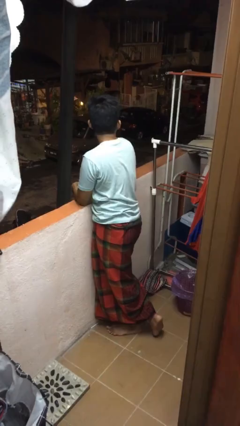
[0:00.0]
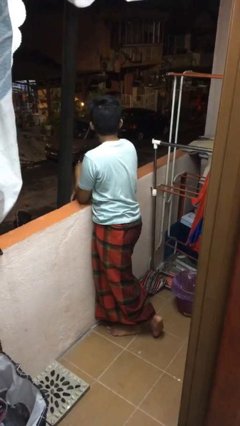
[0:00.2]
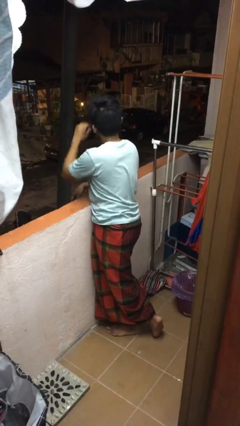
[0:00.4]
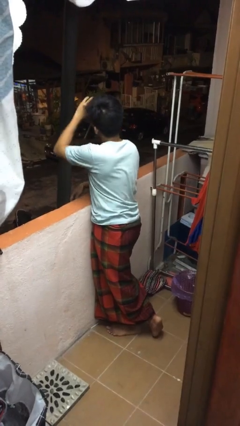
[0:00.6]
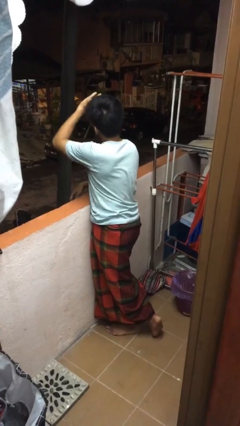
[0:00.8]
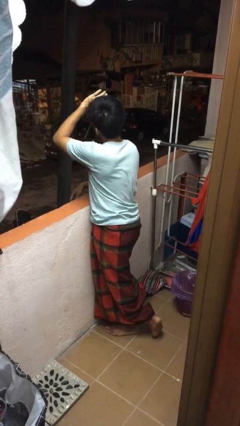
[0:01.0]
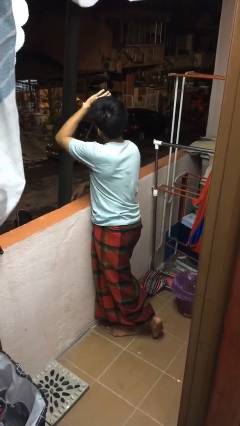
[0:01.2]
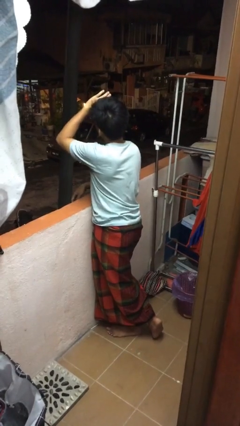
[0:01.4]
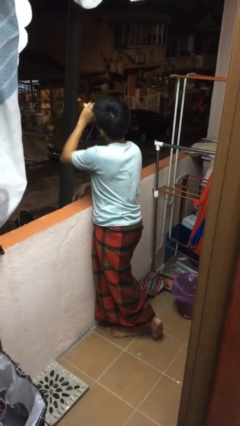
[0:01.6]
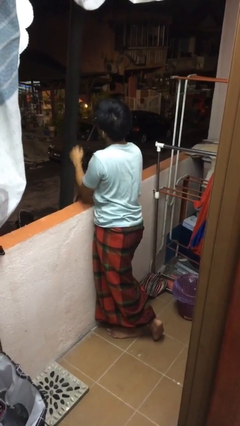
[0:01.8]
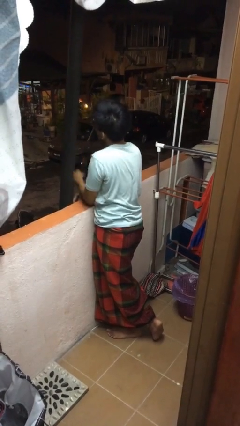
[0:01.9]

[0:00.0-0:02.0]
person shades eyes

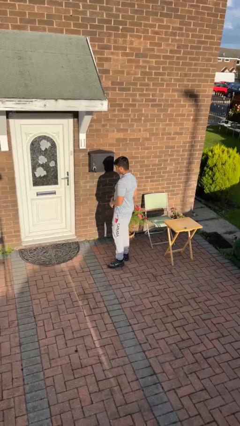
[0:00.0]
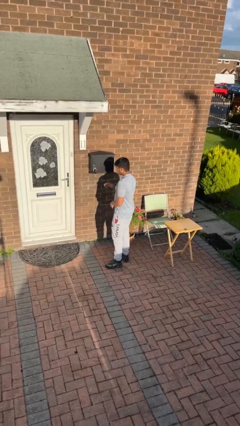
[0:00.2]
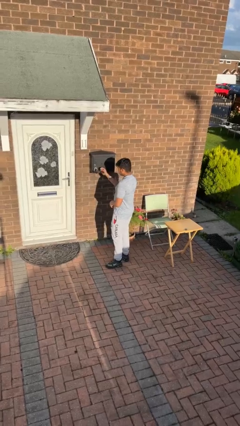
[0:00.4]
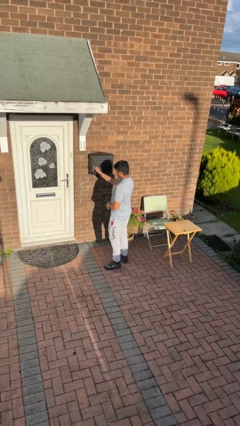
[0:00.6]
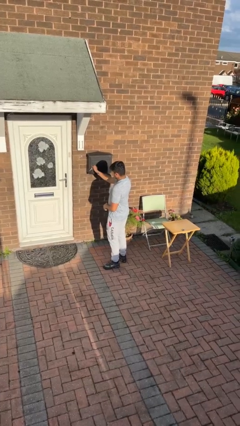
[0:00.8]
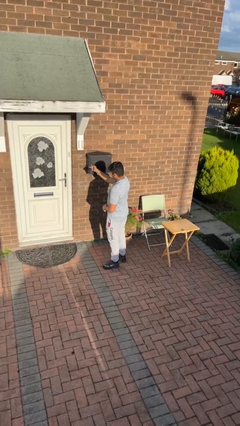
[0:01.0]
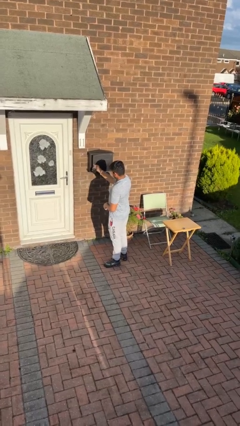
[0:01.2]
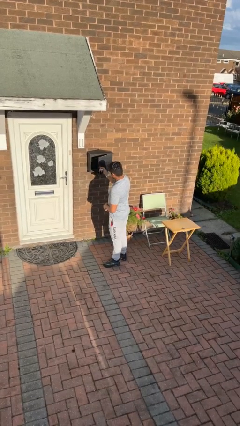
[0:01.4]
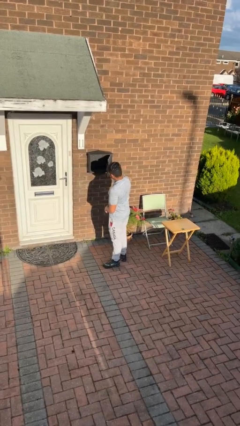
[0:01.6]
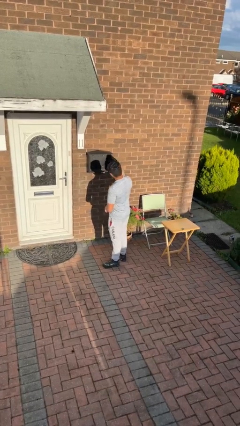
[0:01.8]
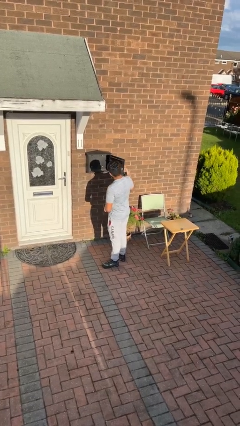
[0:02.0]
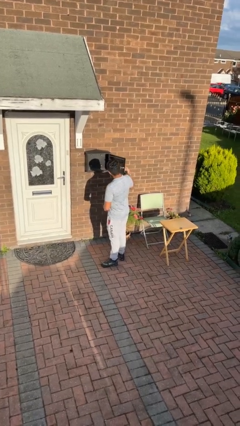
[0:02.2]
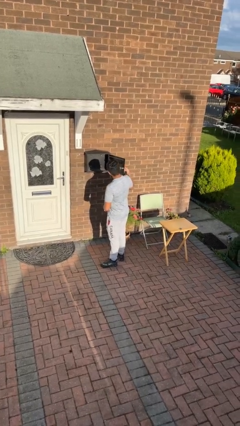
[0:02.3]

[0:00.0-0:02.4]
person opens mailbox

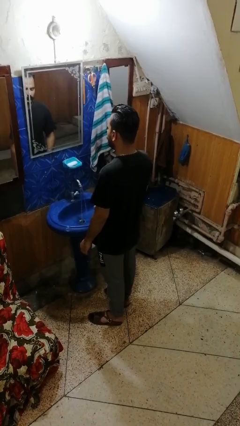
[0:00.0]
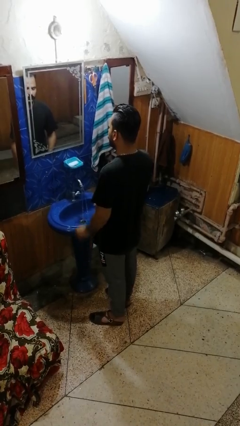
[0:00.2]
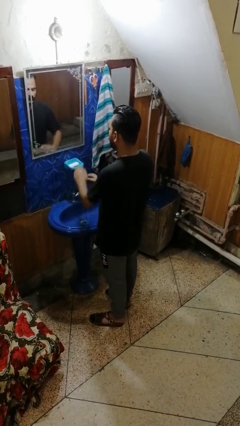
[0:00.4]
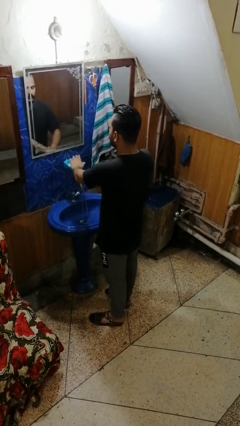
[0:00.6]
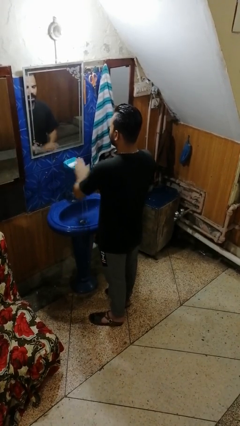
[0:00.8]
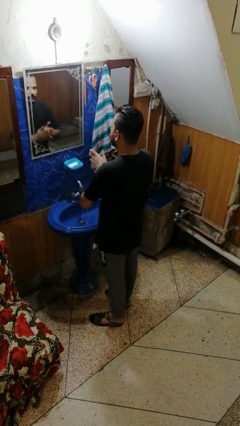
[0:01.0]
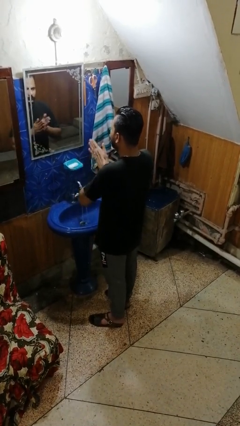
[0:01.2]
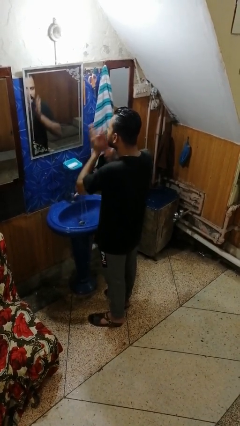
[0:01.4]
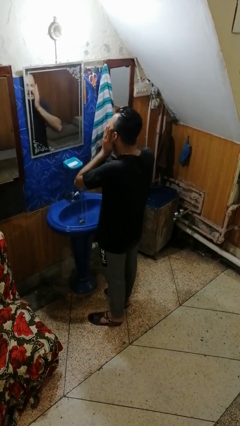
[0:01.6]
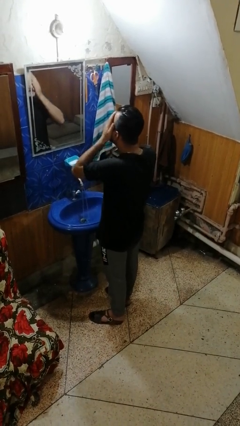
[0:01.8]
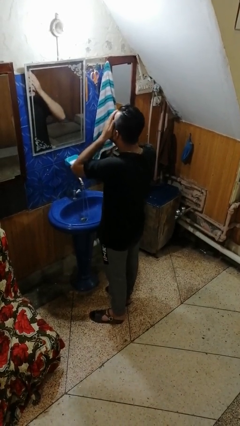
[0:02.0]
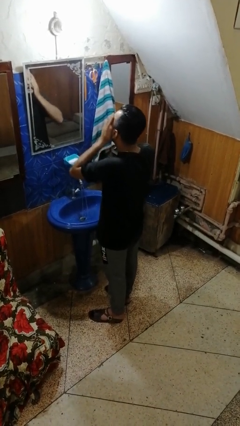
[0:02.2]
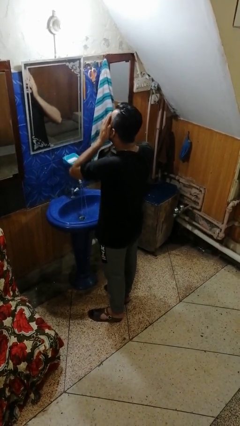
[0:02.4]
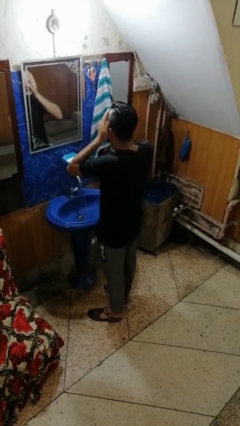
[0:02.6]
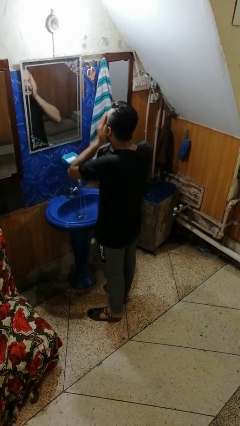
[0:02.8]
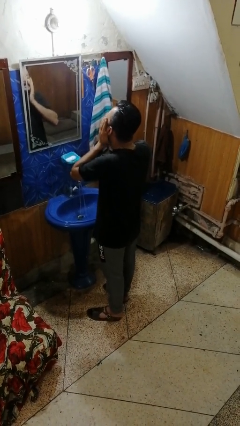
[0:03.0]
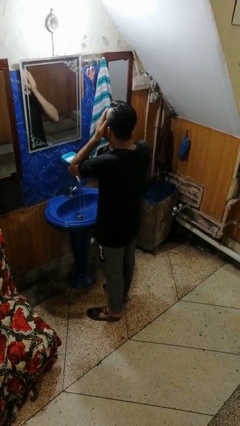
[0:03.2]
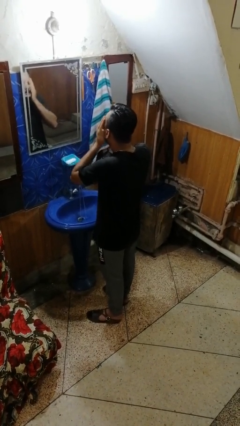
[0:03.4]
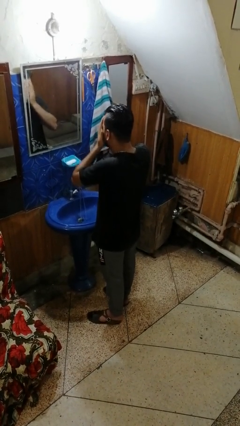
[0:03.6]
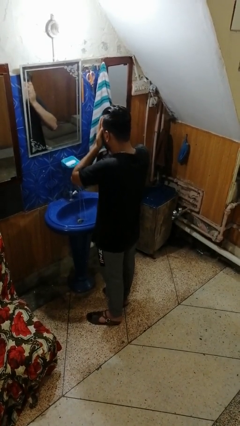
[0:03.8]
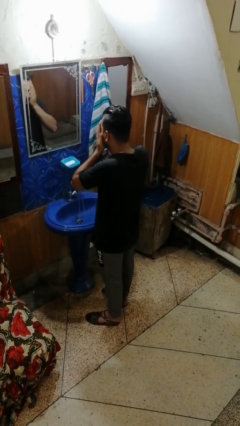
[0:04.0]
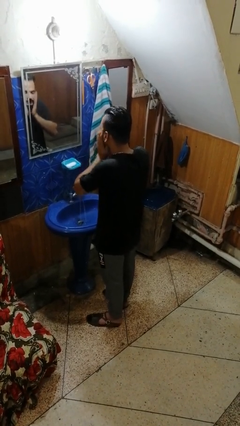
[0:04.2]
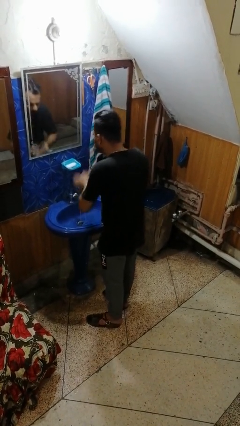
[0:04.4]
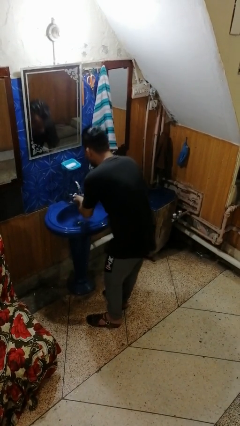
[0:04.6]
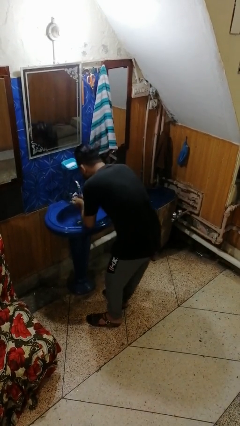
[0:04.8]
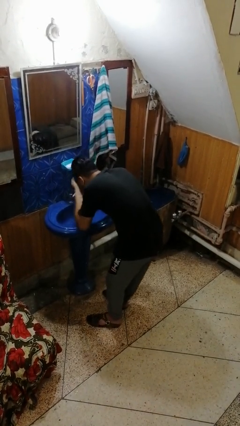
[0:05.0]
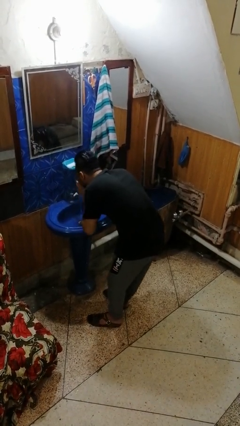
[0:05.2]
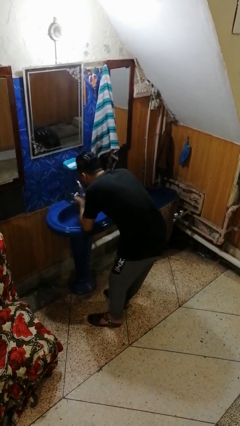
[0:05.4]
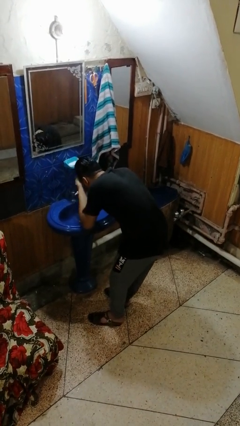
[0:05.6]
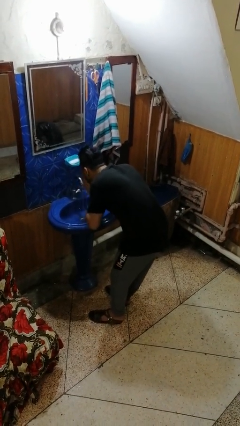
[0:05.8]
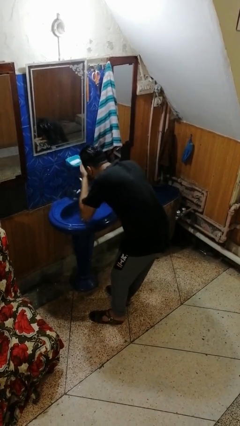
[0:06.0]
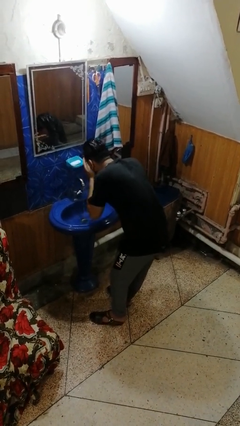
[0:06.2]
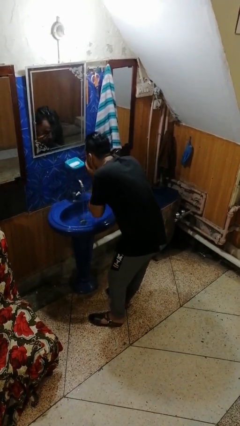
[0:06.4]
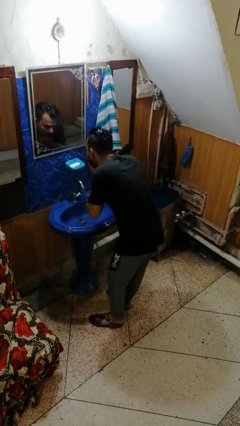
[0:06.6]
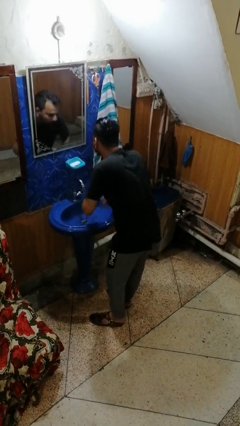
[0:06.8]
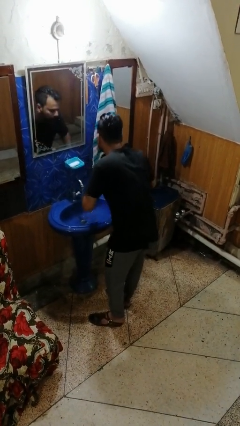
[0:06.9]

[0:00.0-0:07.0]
person washes face

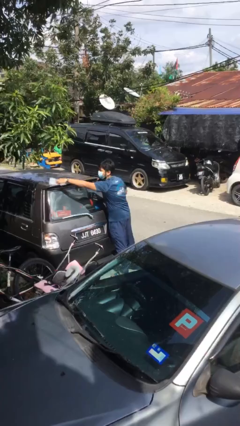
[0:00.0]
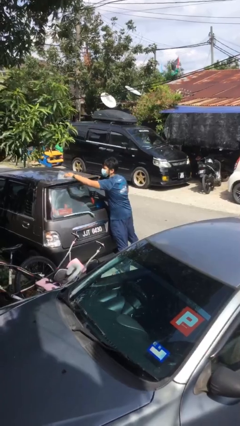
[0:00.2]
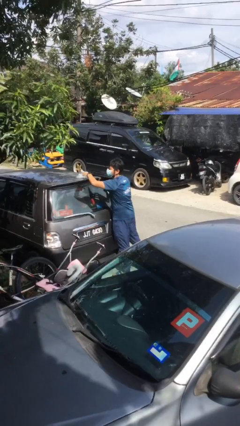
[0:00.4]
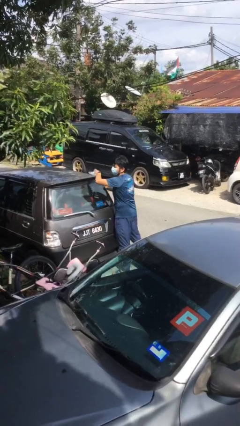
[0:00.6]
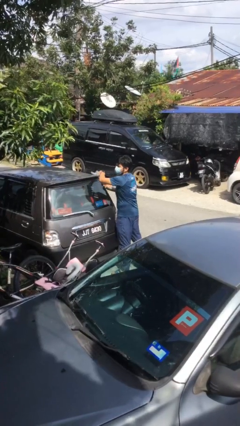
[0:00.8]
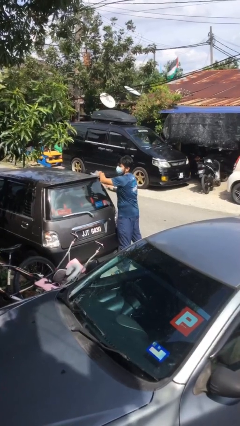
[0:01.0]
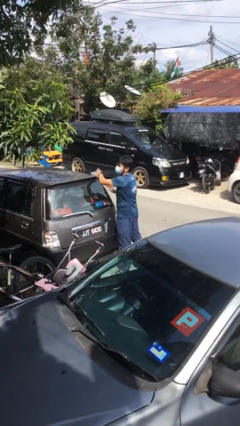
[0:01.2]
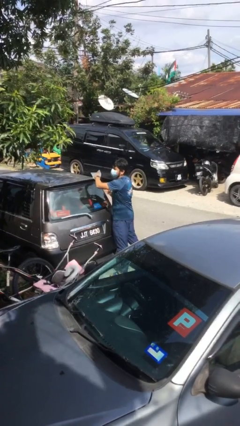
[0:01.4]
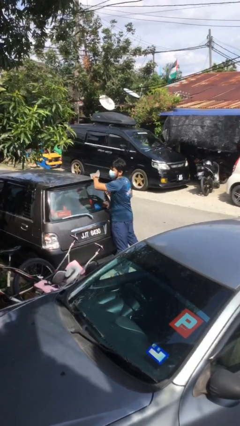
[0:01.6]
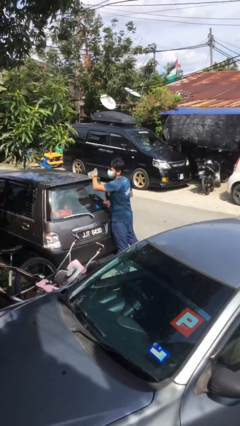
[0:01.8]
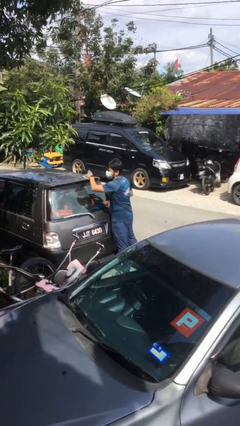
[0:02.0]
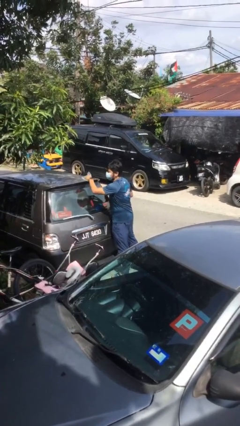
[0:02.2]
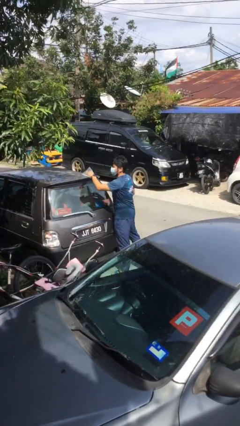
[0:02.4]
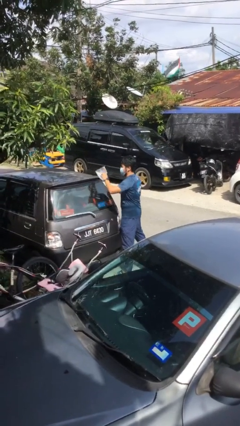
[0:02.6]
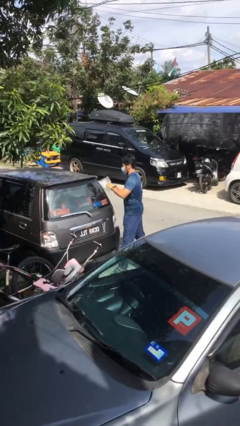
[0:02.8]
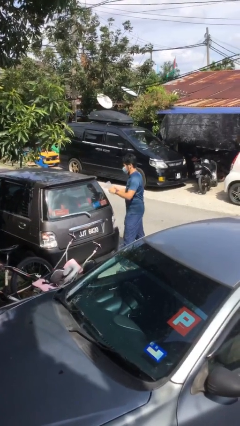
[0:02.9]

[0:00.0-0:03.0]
person polishes car with rag

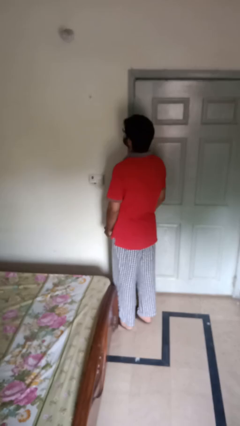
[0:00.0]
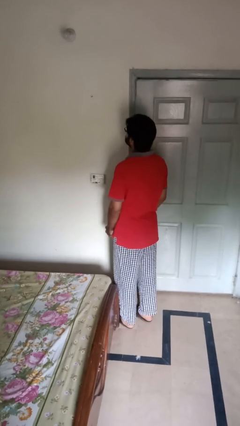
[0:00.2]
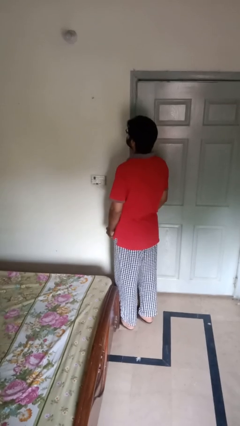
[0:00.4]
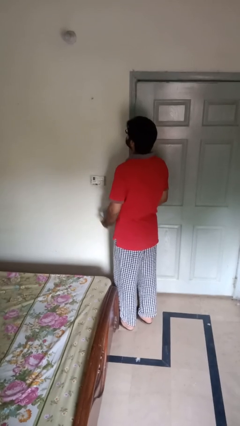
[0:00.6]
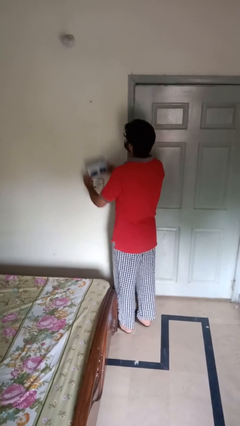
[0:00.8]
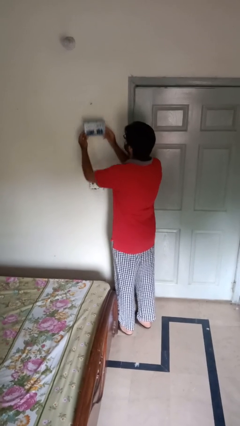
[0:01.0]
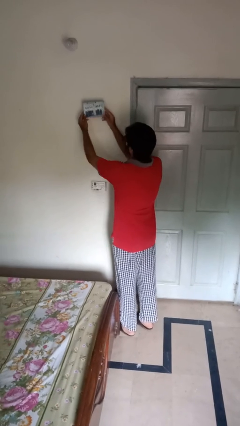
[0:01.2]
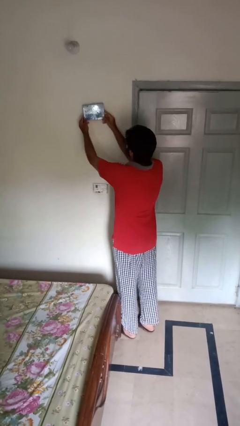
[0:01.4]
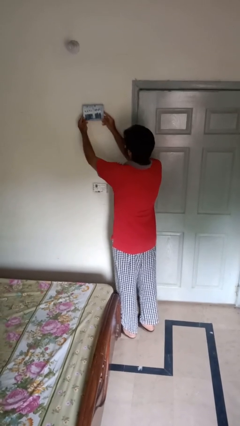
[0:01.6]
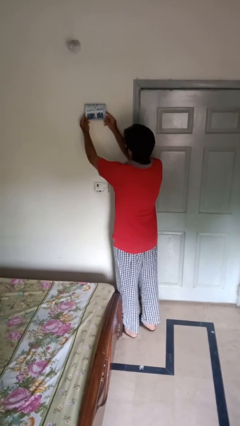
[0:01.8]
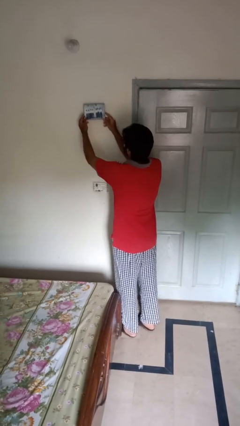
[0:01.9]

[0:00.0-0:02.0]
person puts up picture frame

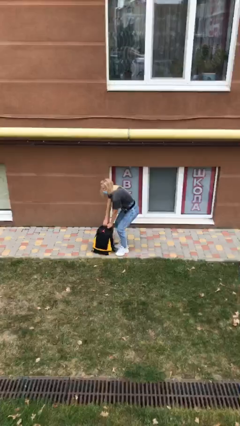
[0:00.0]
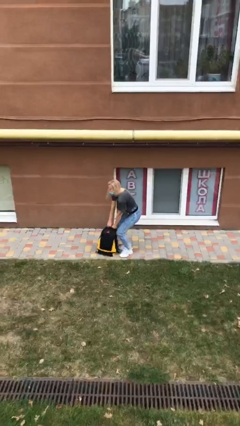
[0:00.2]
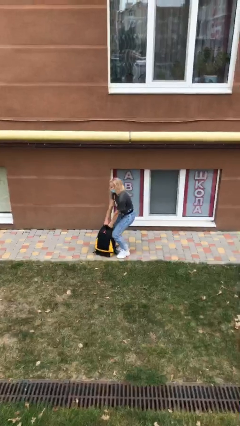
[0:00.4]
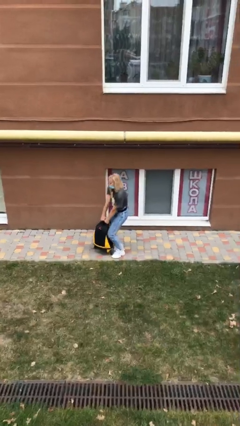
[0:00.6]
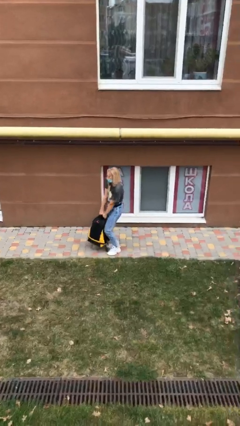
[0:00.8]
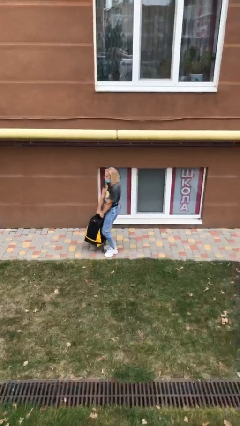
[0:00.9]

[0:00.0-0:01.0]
person picks up object from floor
